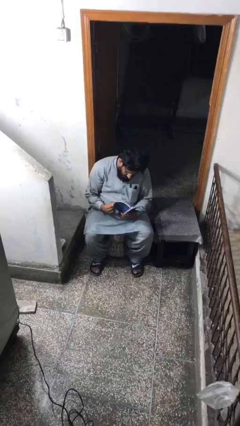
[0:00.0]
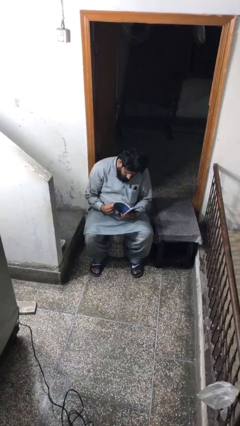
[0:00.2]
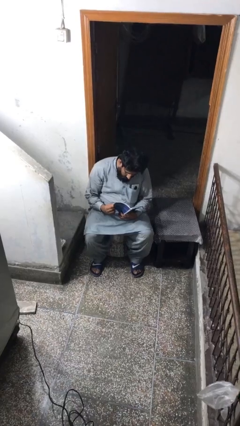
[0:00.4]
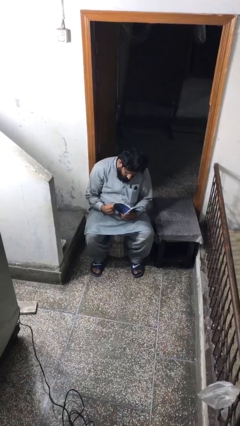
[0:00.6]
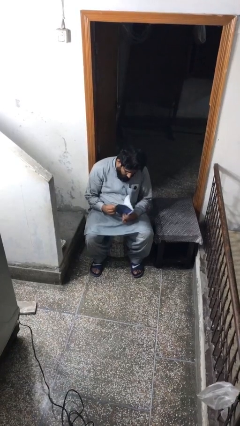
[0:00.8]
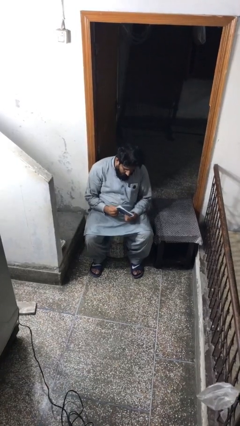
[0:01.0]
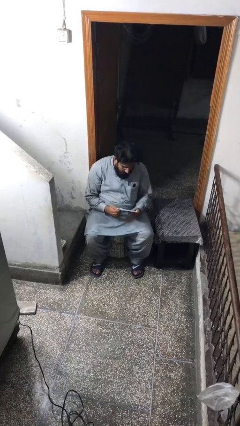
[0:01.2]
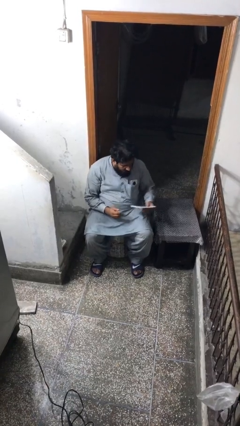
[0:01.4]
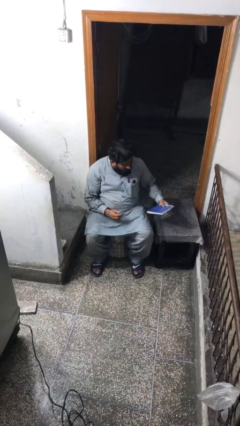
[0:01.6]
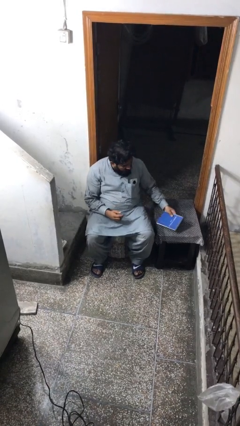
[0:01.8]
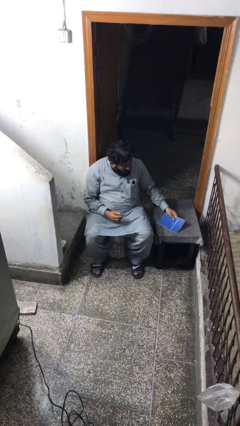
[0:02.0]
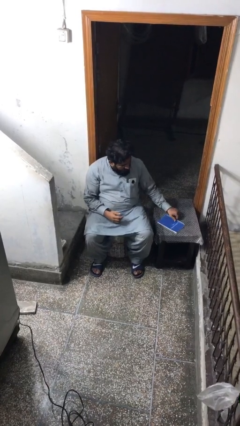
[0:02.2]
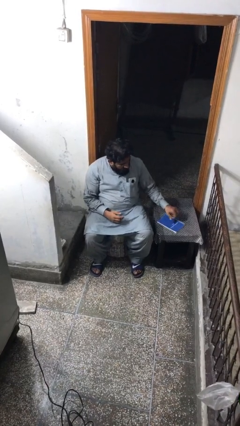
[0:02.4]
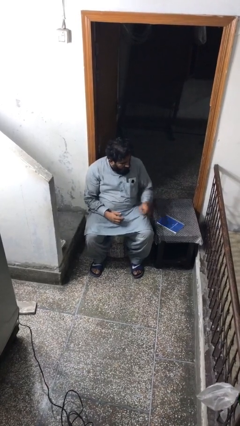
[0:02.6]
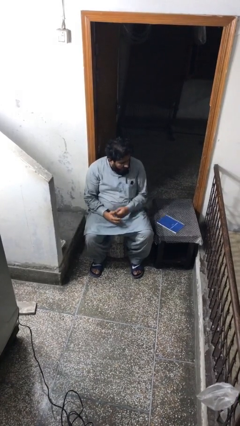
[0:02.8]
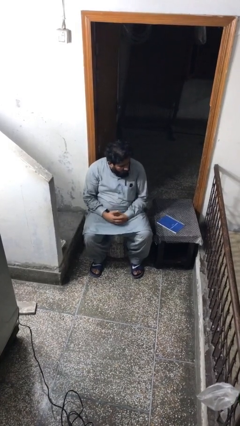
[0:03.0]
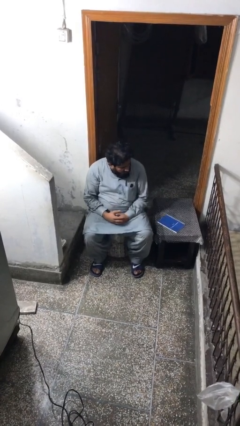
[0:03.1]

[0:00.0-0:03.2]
person puts down object on table

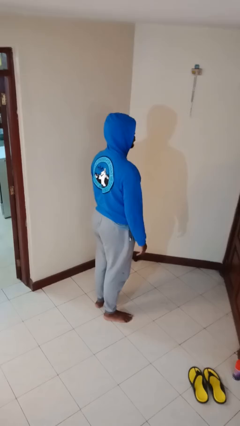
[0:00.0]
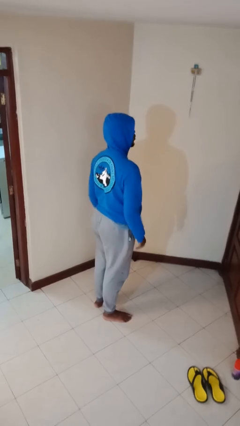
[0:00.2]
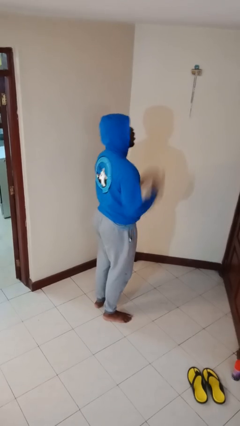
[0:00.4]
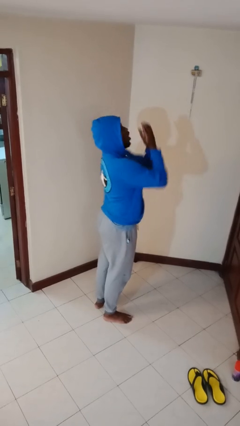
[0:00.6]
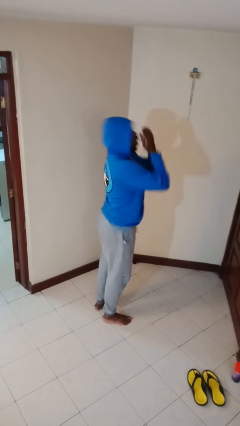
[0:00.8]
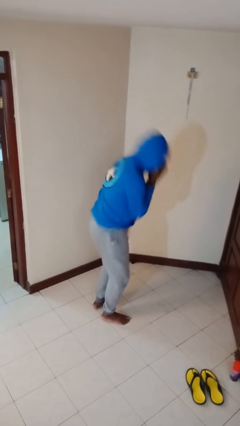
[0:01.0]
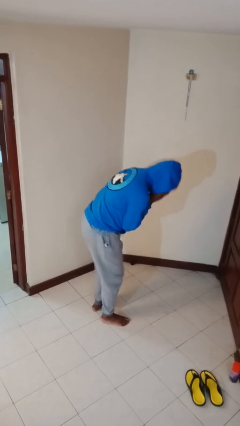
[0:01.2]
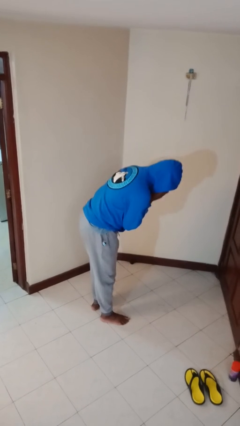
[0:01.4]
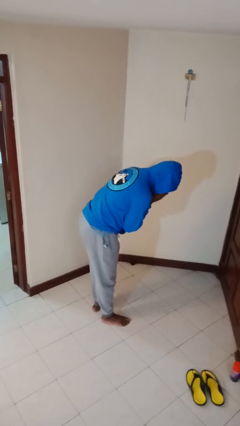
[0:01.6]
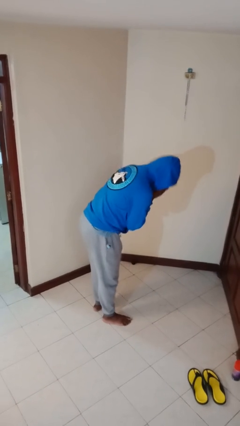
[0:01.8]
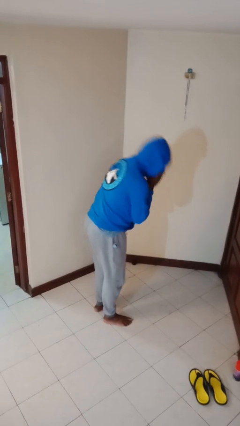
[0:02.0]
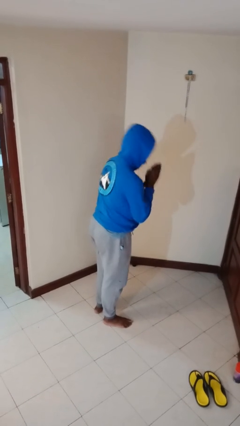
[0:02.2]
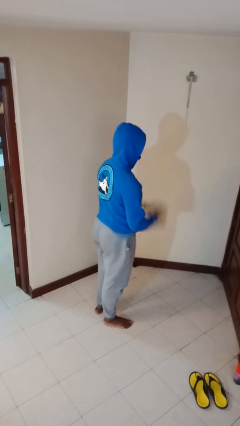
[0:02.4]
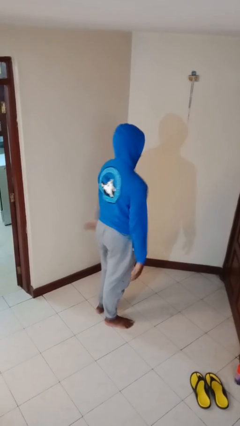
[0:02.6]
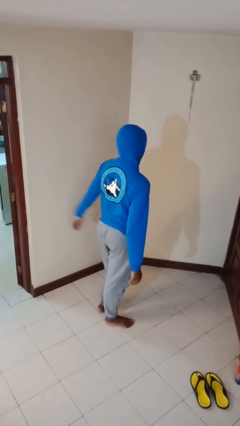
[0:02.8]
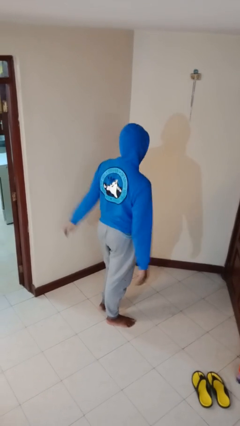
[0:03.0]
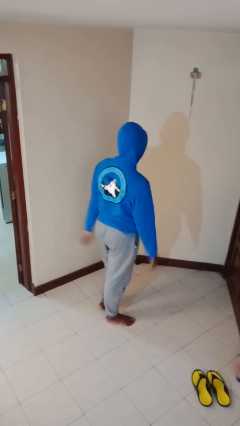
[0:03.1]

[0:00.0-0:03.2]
person sneezes into hand

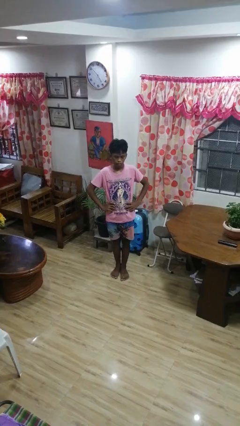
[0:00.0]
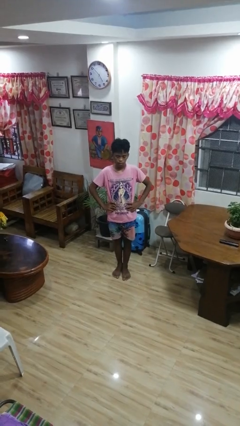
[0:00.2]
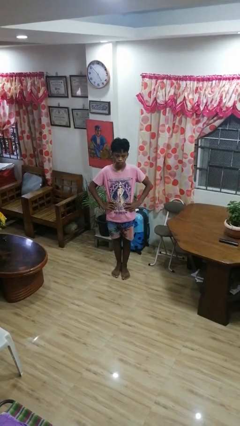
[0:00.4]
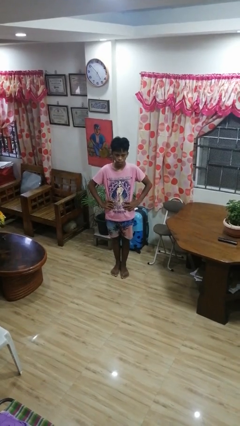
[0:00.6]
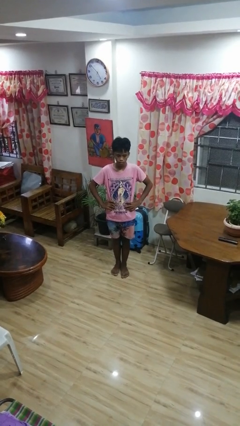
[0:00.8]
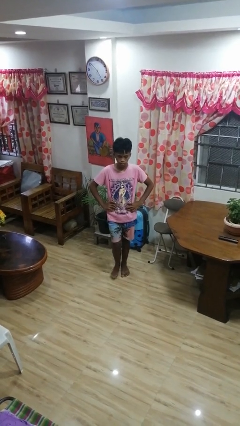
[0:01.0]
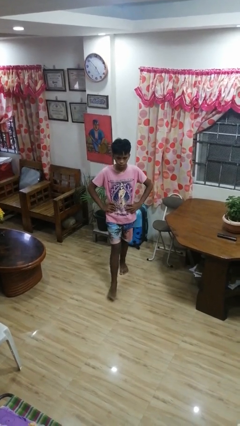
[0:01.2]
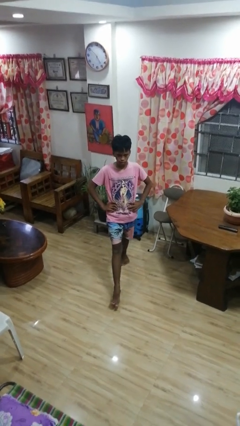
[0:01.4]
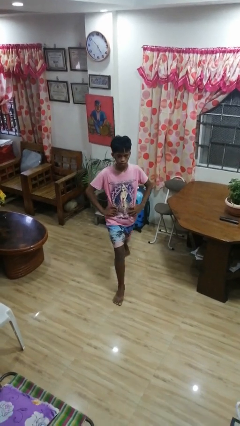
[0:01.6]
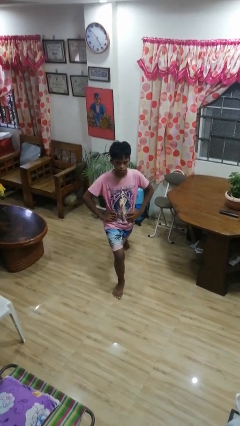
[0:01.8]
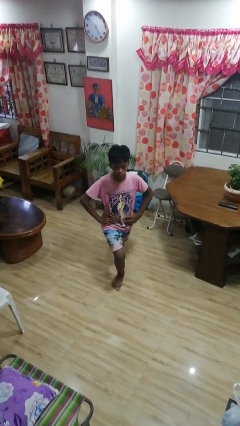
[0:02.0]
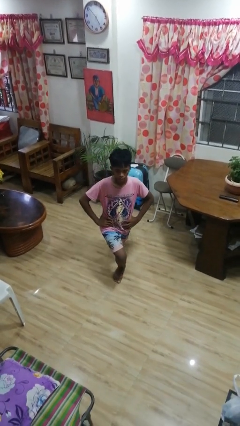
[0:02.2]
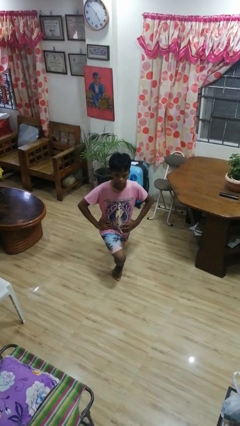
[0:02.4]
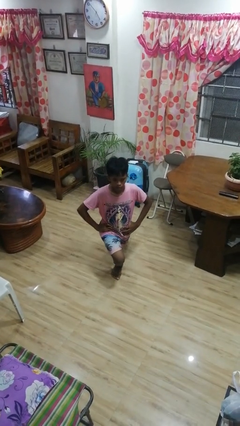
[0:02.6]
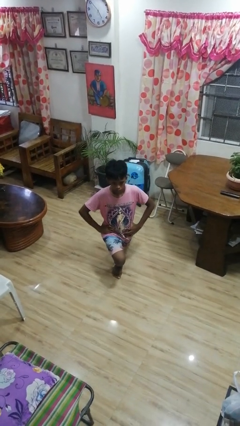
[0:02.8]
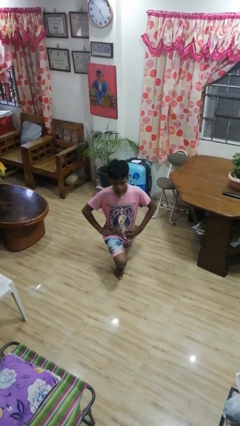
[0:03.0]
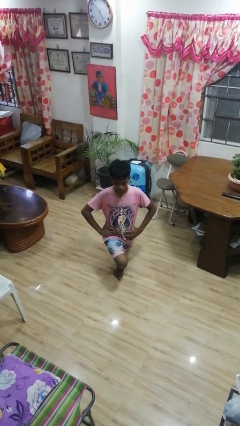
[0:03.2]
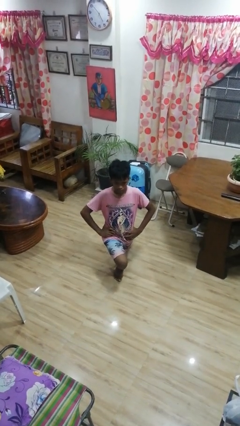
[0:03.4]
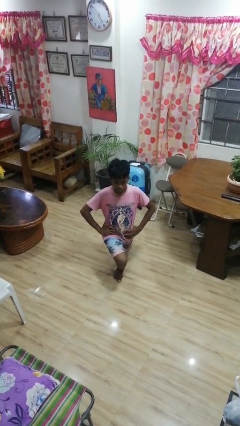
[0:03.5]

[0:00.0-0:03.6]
person exercises with lunges

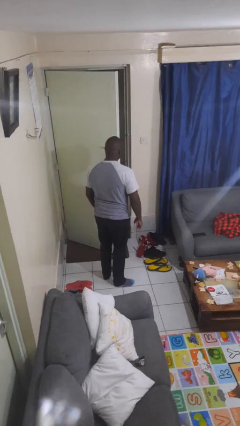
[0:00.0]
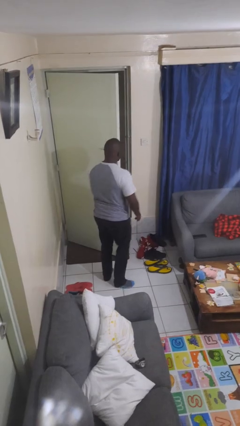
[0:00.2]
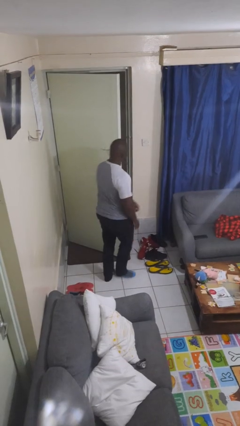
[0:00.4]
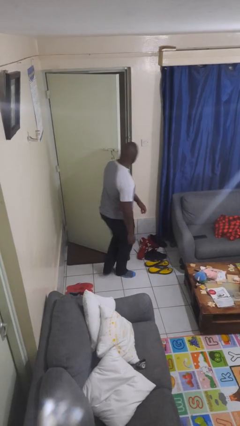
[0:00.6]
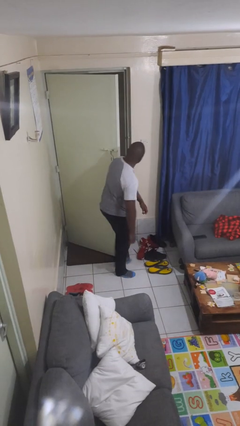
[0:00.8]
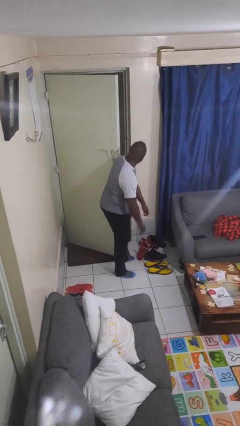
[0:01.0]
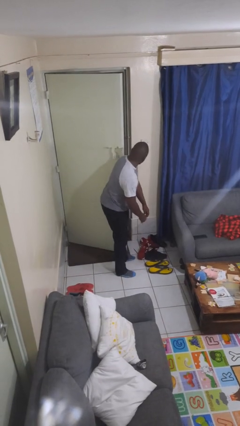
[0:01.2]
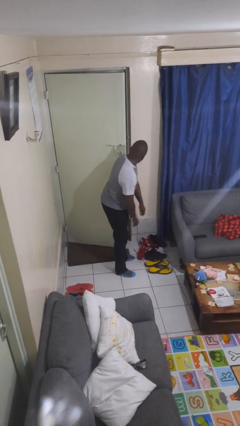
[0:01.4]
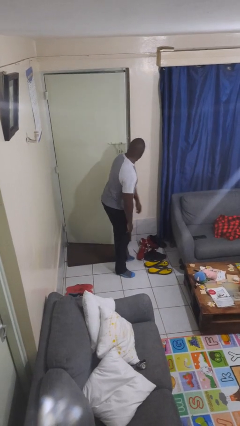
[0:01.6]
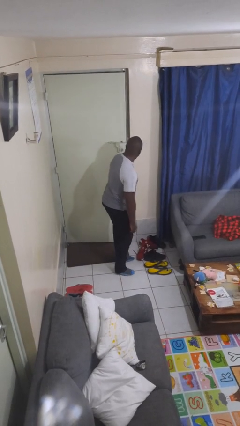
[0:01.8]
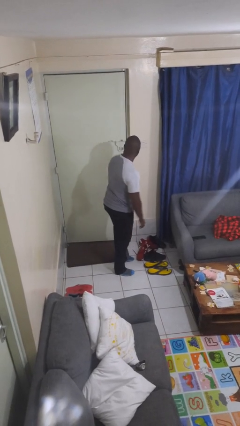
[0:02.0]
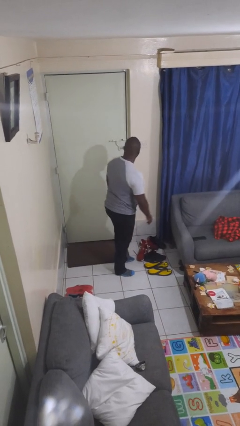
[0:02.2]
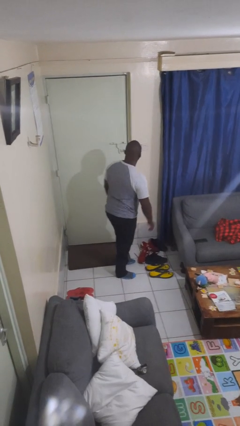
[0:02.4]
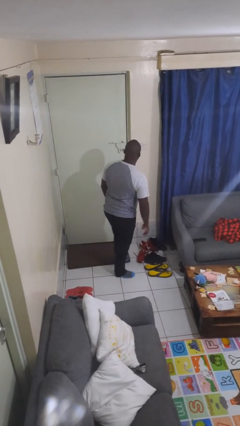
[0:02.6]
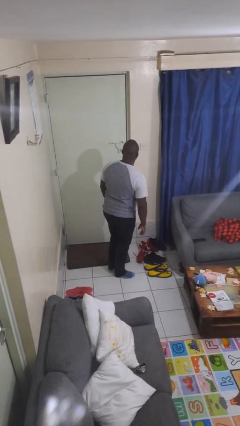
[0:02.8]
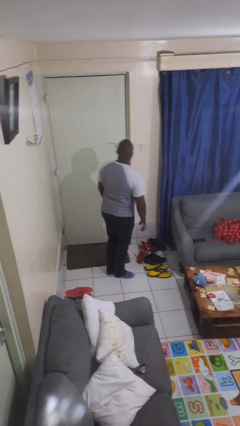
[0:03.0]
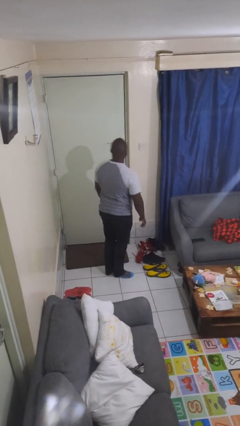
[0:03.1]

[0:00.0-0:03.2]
person closes door with hip

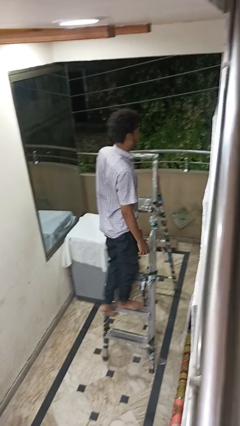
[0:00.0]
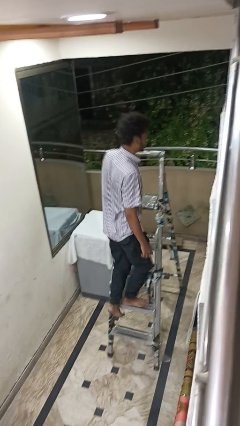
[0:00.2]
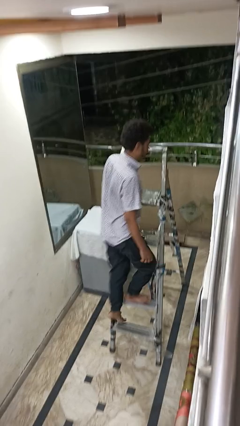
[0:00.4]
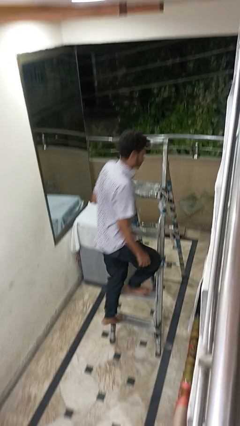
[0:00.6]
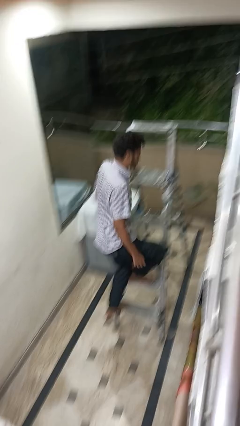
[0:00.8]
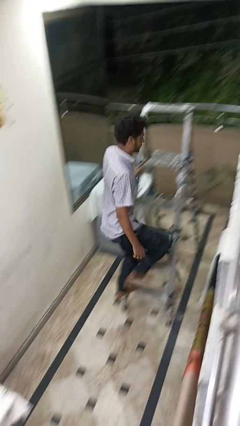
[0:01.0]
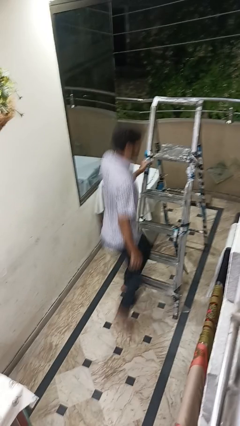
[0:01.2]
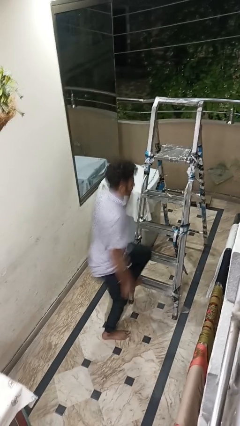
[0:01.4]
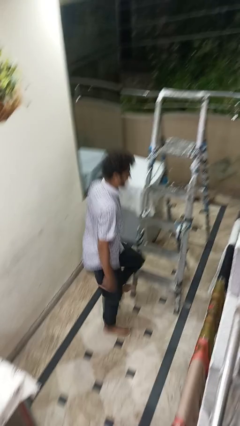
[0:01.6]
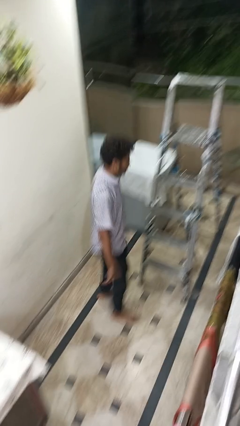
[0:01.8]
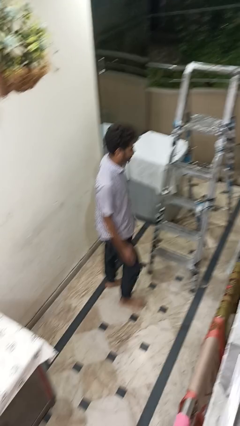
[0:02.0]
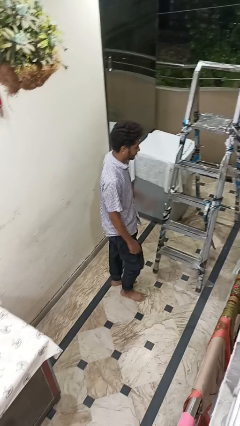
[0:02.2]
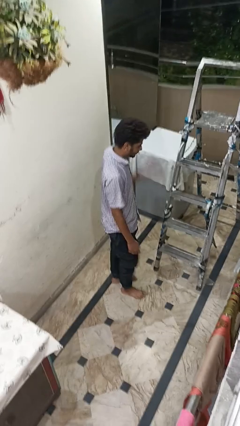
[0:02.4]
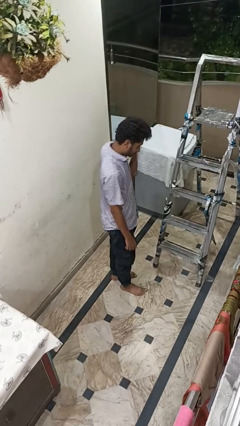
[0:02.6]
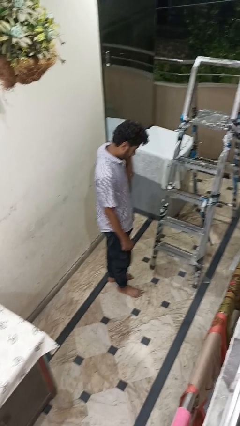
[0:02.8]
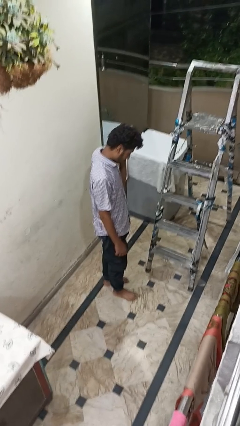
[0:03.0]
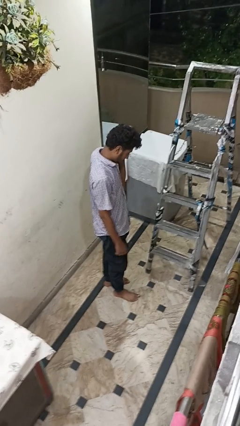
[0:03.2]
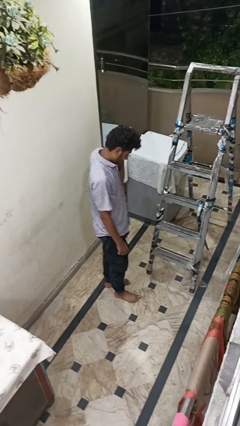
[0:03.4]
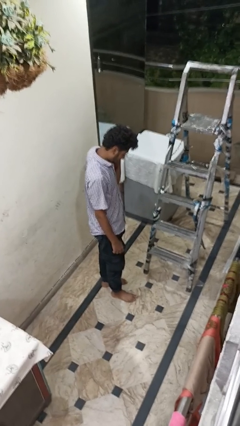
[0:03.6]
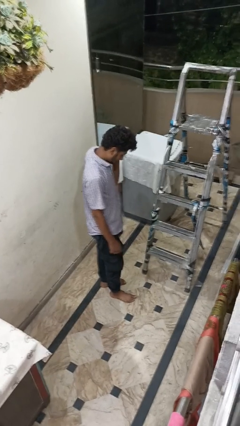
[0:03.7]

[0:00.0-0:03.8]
person climbs down ladder

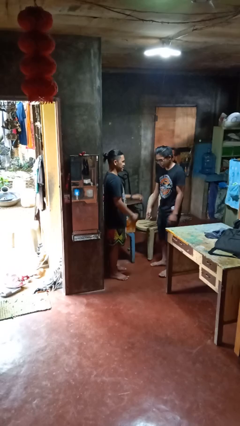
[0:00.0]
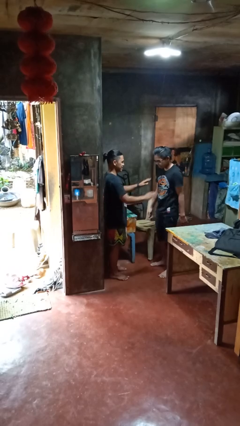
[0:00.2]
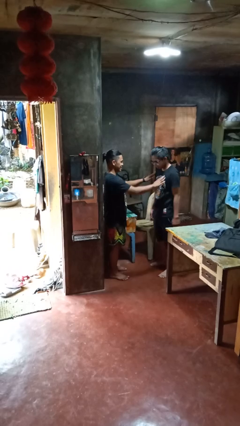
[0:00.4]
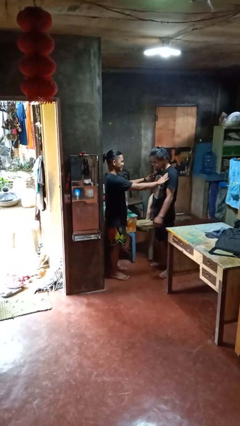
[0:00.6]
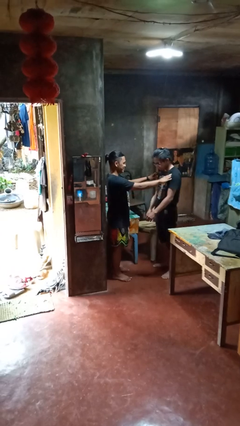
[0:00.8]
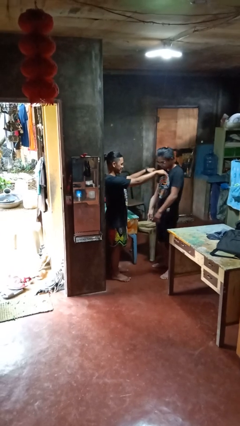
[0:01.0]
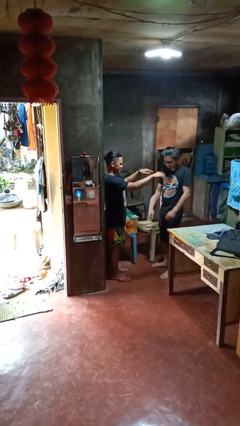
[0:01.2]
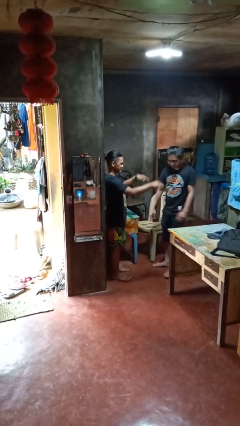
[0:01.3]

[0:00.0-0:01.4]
person shoves person
